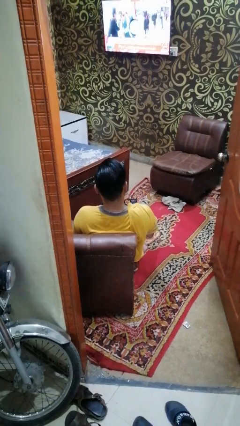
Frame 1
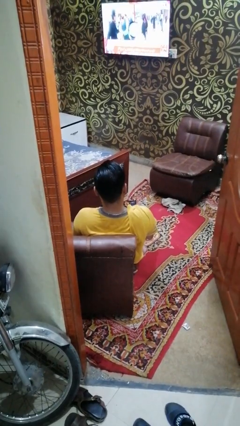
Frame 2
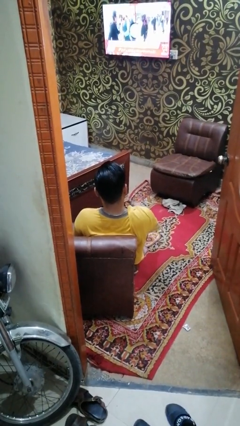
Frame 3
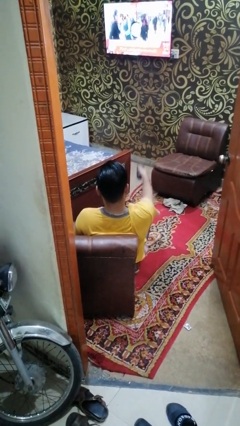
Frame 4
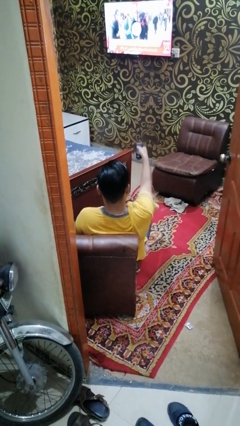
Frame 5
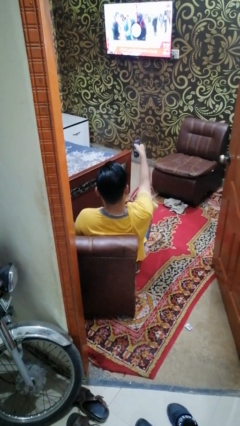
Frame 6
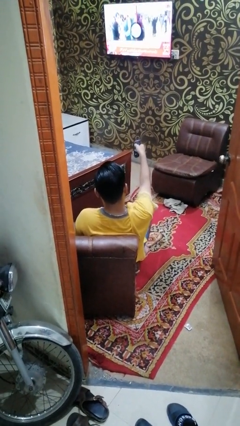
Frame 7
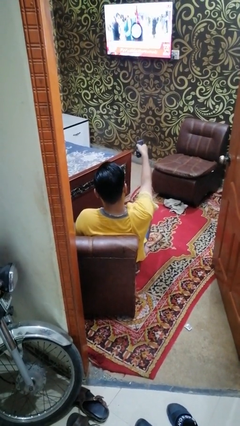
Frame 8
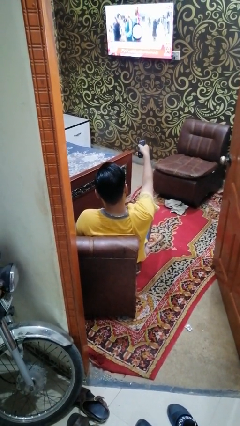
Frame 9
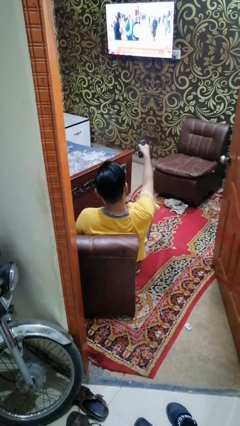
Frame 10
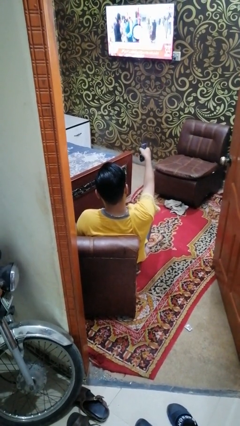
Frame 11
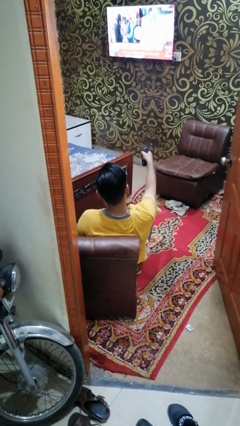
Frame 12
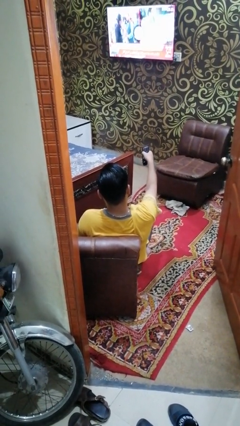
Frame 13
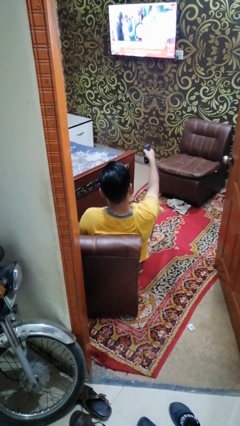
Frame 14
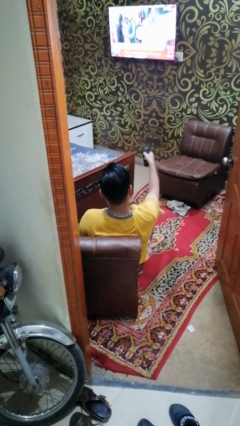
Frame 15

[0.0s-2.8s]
person uses television remote

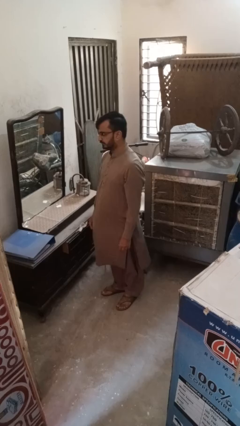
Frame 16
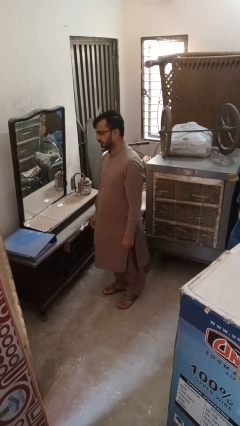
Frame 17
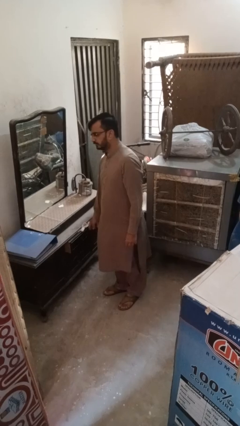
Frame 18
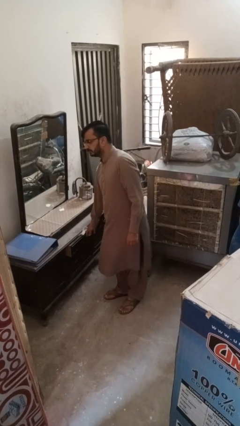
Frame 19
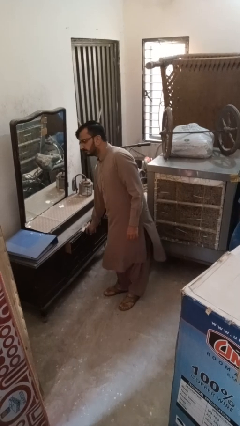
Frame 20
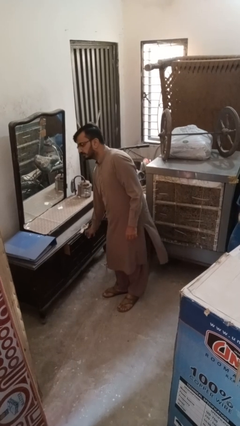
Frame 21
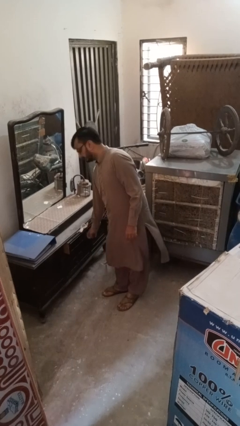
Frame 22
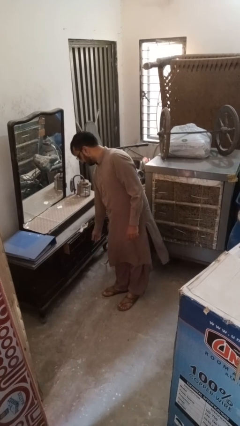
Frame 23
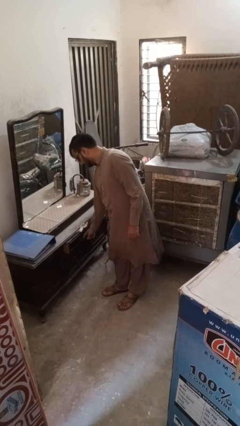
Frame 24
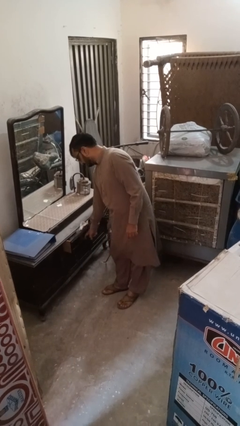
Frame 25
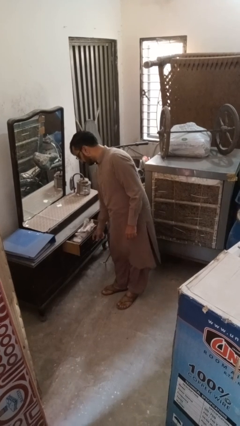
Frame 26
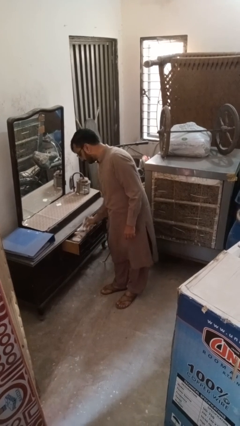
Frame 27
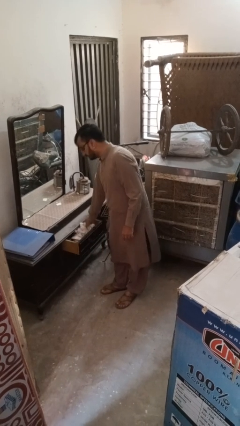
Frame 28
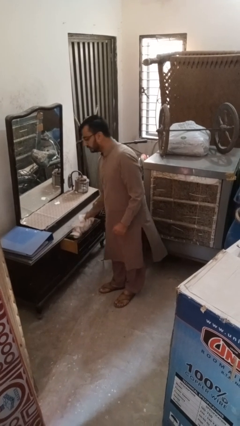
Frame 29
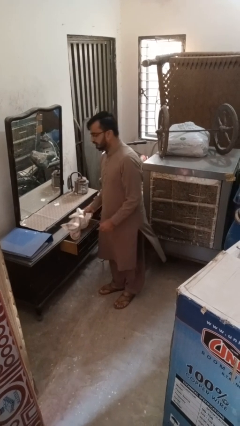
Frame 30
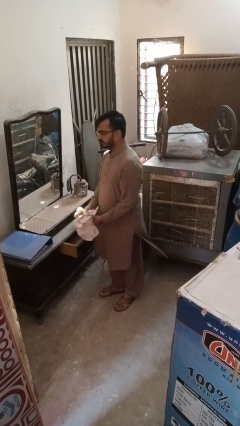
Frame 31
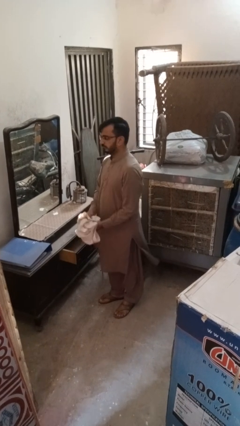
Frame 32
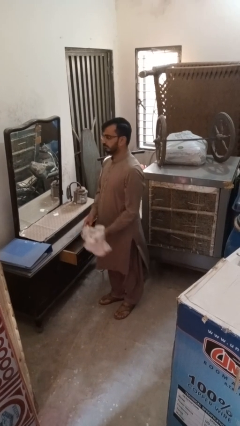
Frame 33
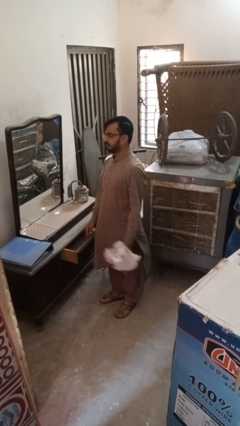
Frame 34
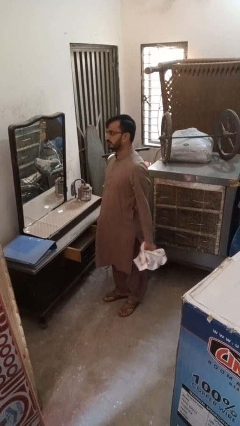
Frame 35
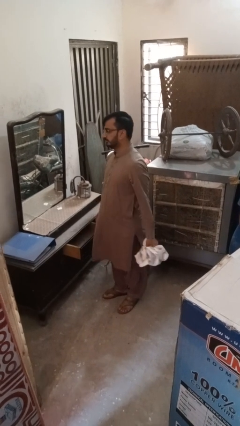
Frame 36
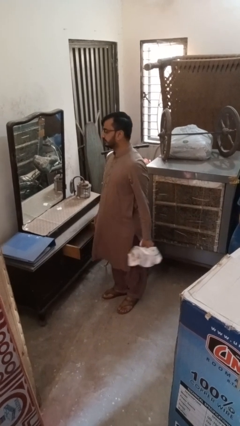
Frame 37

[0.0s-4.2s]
person takes clothes from dresser

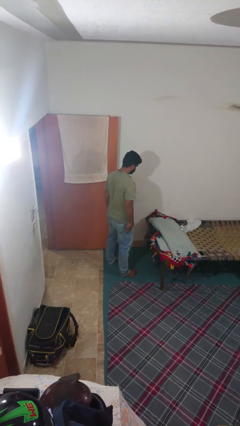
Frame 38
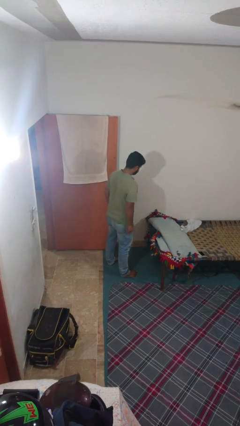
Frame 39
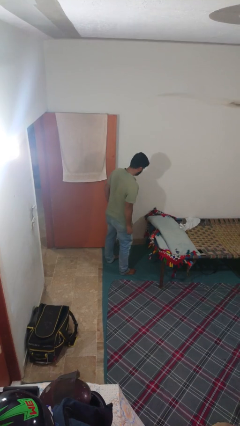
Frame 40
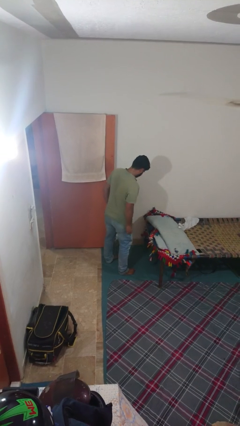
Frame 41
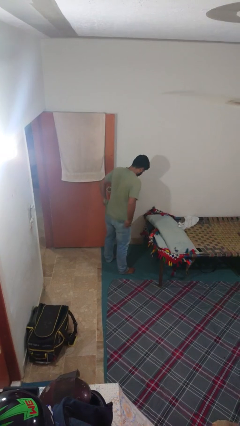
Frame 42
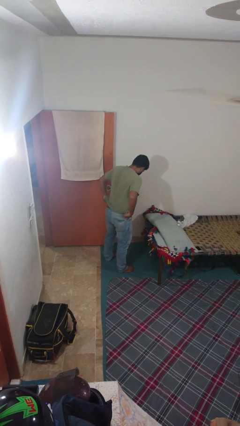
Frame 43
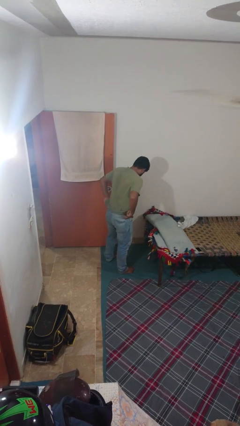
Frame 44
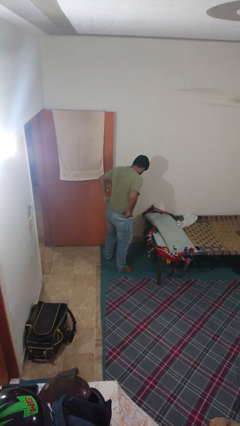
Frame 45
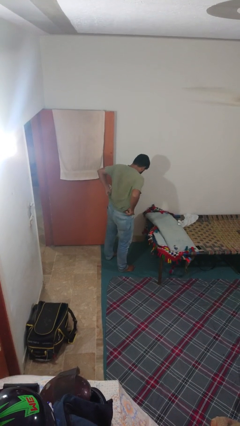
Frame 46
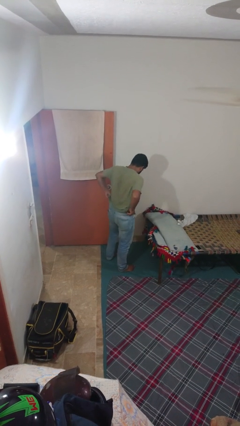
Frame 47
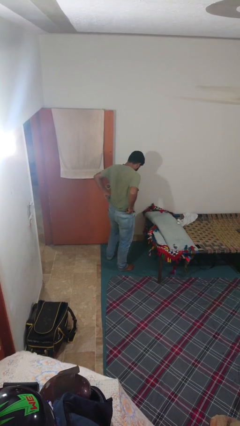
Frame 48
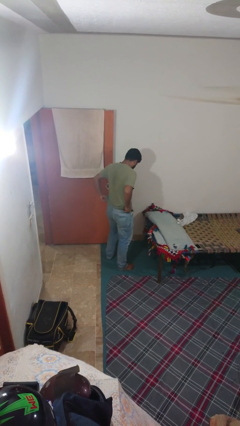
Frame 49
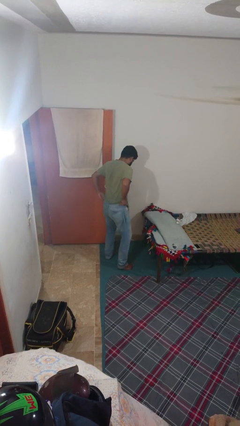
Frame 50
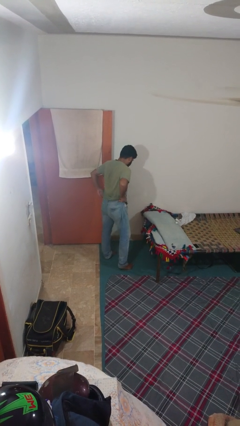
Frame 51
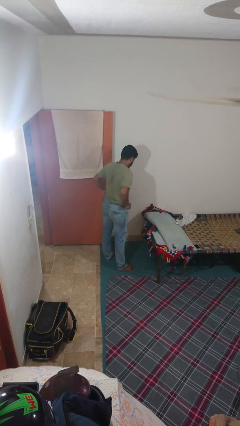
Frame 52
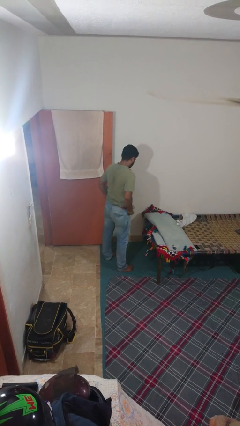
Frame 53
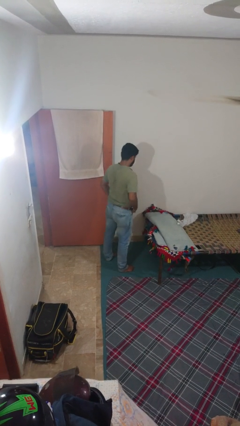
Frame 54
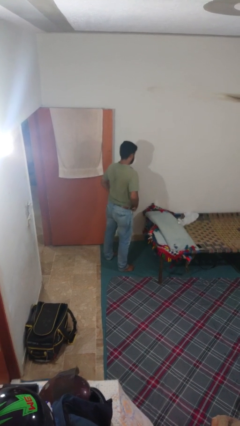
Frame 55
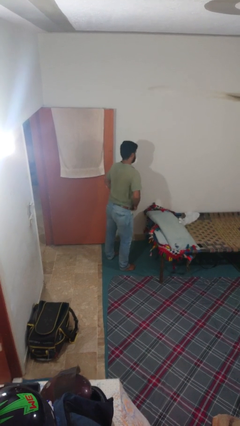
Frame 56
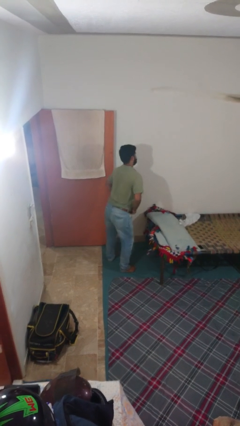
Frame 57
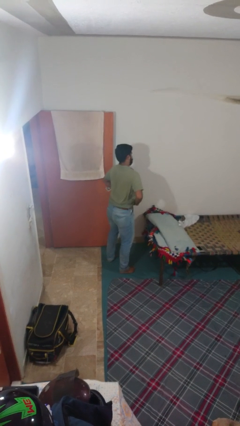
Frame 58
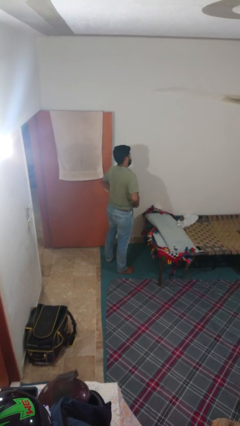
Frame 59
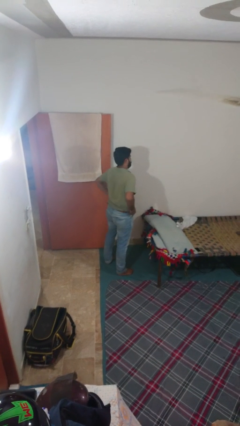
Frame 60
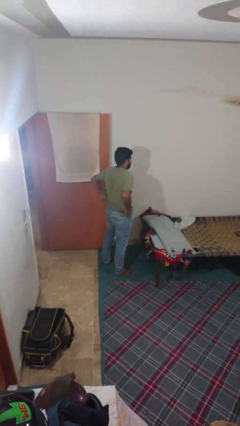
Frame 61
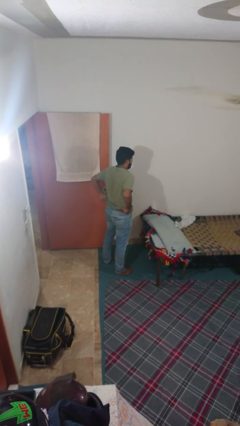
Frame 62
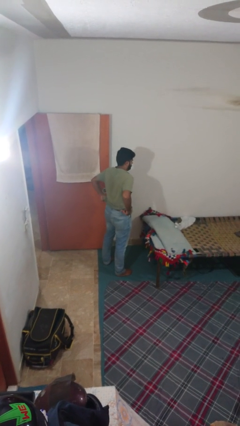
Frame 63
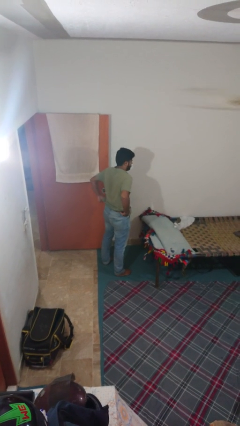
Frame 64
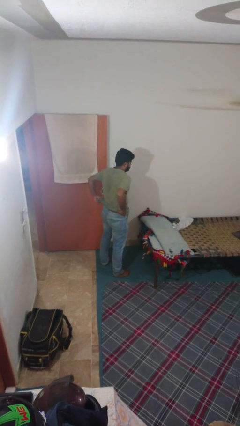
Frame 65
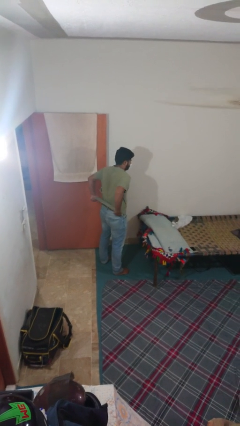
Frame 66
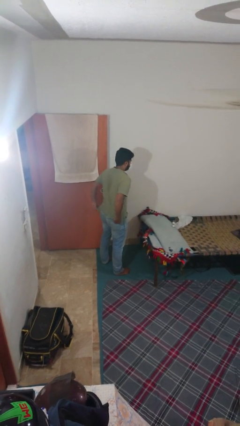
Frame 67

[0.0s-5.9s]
person hikes up pants

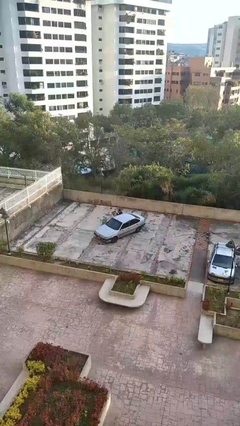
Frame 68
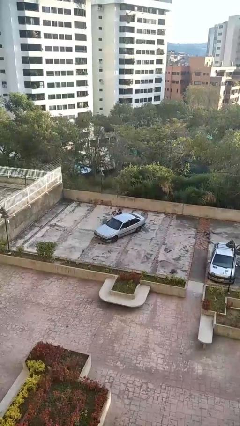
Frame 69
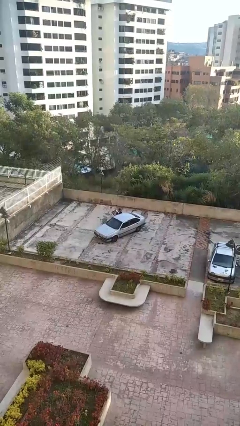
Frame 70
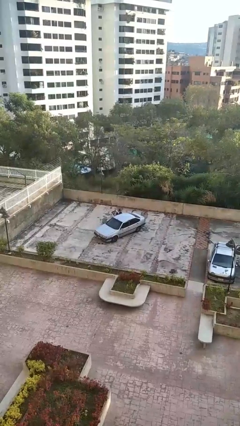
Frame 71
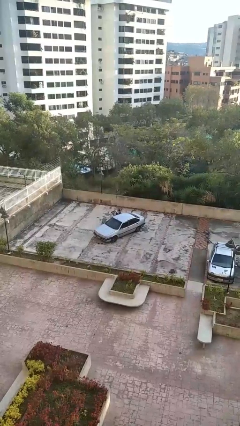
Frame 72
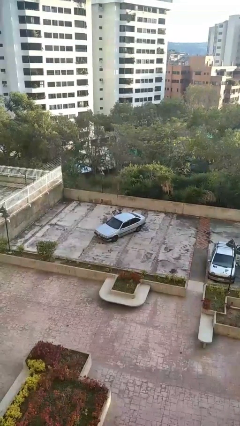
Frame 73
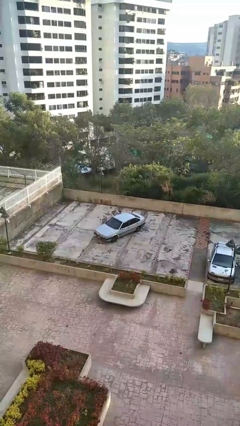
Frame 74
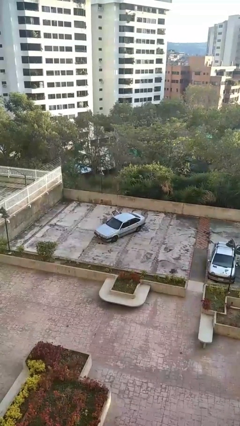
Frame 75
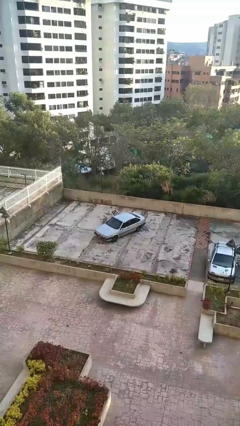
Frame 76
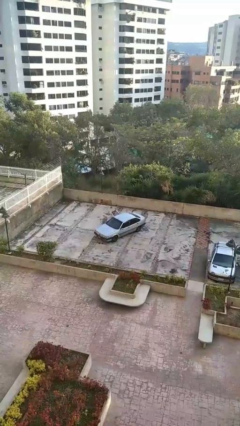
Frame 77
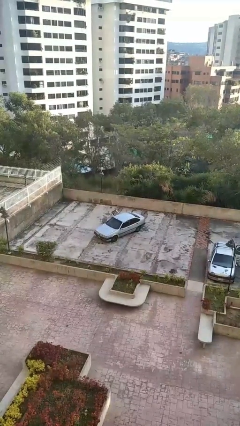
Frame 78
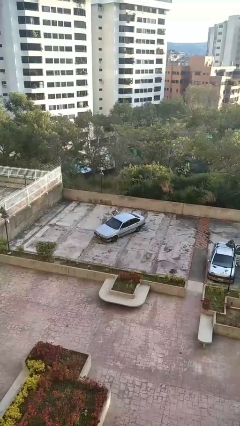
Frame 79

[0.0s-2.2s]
person enters car

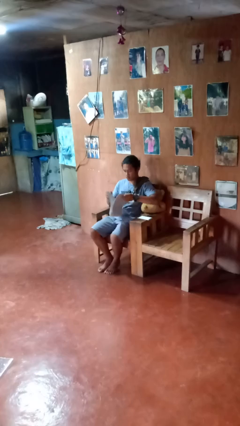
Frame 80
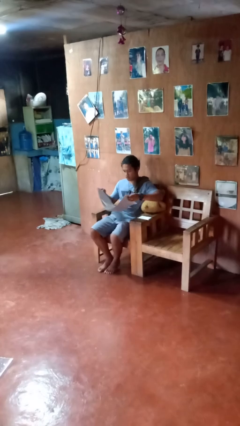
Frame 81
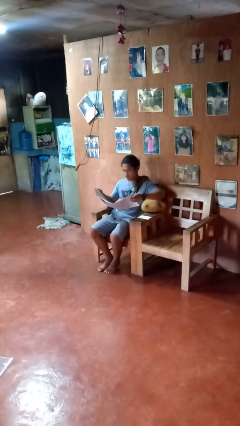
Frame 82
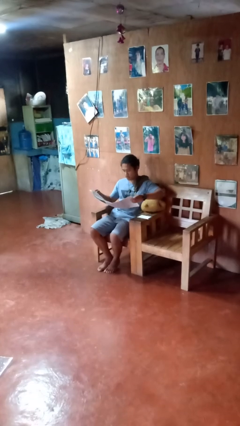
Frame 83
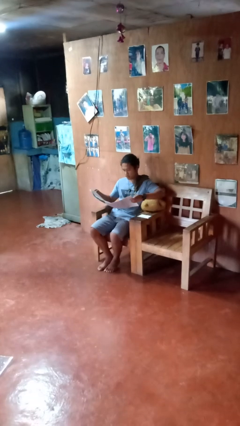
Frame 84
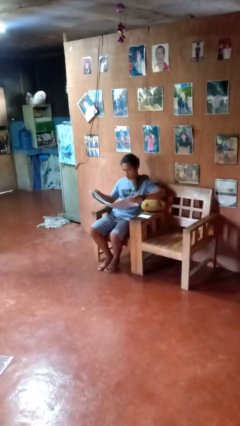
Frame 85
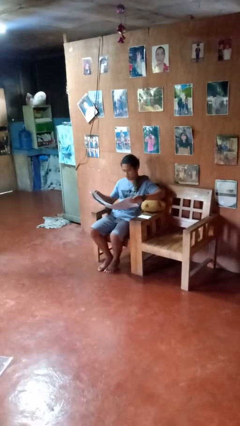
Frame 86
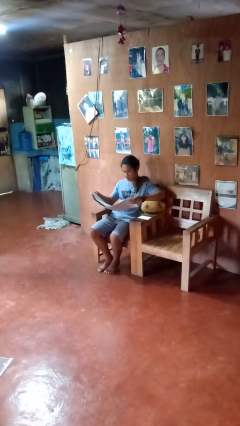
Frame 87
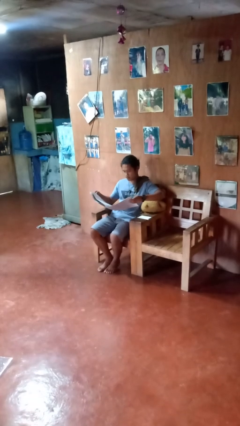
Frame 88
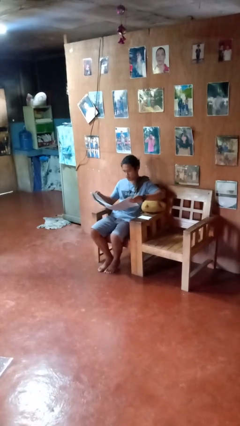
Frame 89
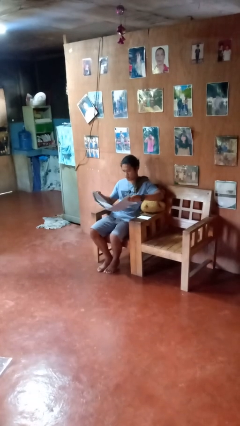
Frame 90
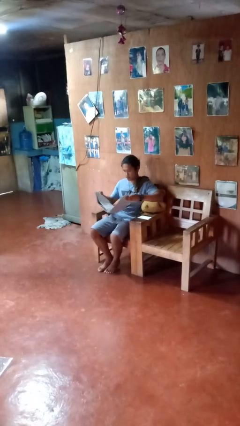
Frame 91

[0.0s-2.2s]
person reads newspaper

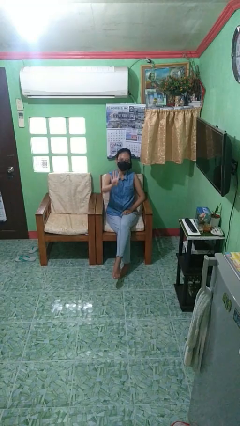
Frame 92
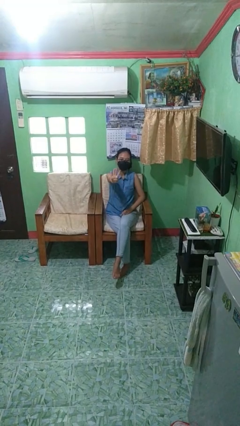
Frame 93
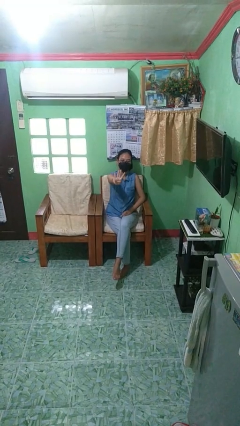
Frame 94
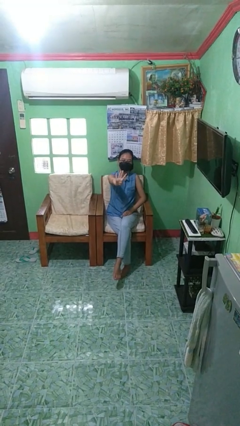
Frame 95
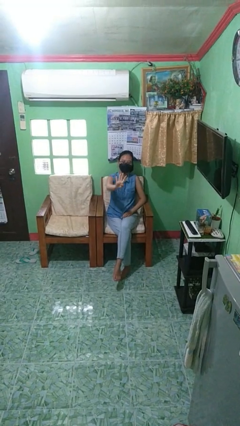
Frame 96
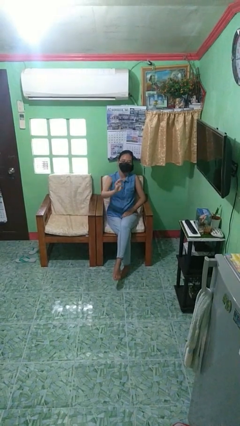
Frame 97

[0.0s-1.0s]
person gestures number four
